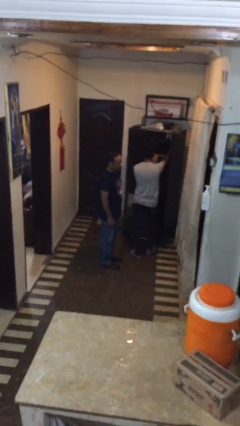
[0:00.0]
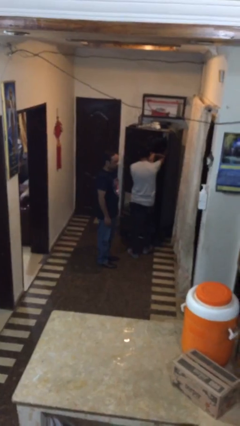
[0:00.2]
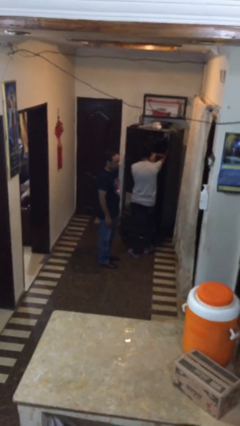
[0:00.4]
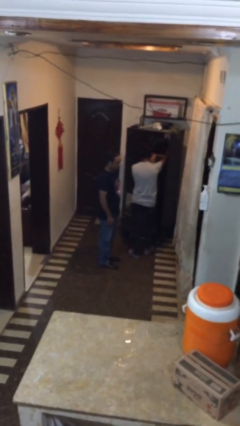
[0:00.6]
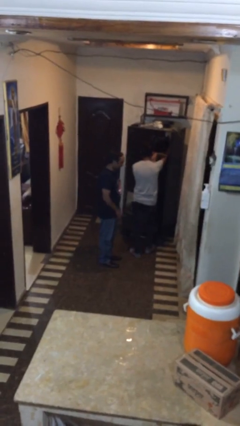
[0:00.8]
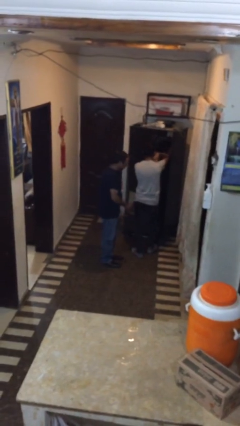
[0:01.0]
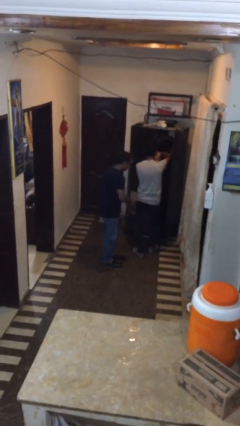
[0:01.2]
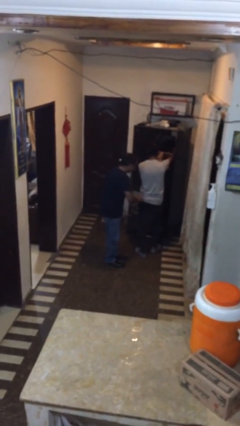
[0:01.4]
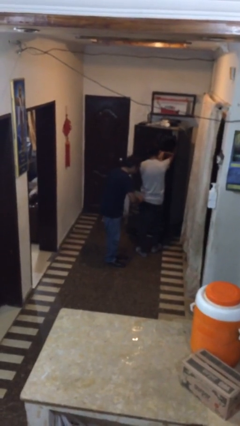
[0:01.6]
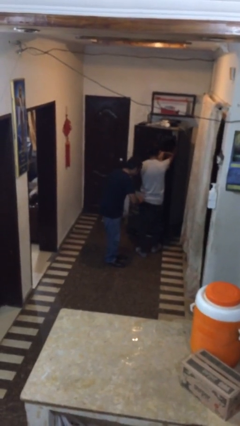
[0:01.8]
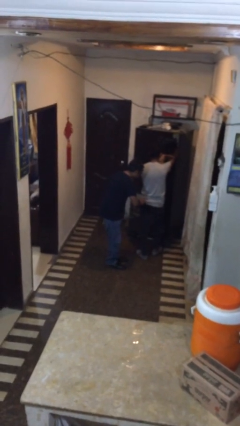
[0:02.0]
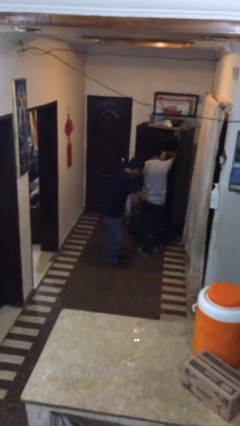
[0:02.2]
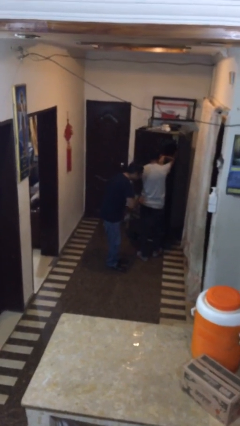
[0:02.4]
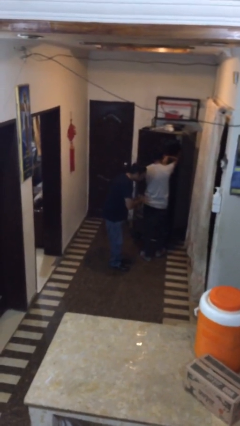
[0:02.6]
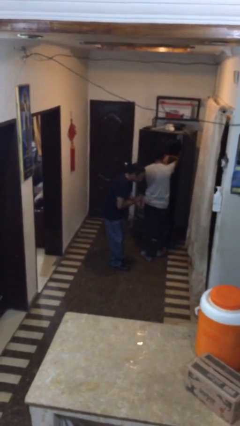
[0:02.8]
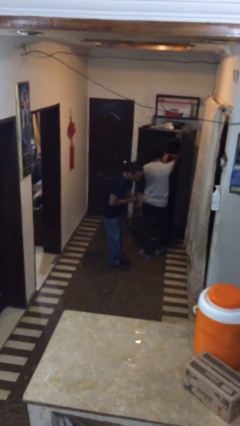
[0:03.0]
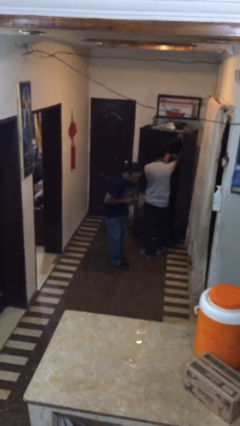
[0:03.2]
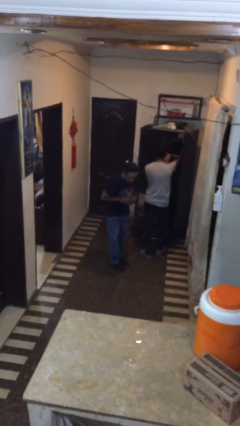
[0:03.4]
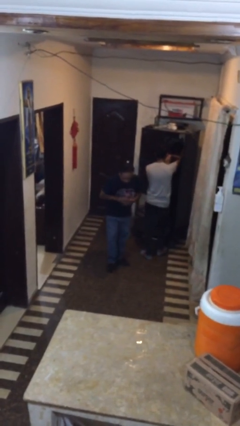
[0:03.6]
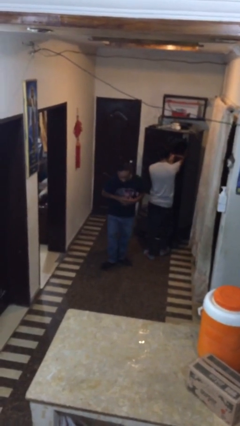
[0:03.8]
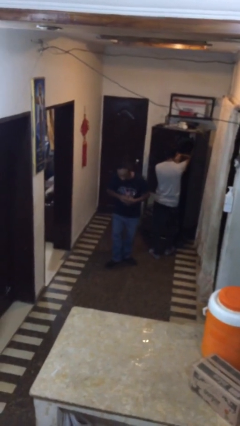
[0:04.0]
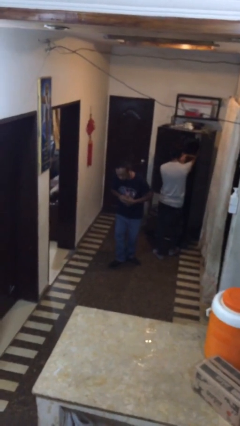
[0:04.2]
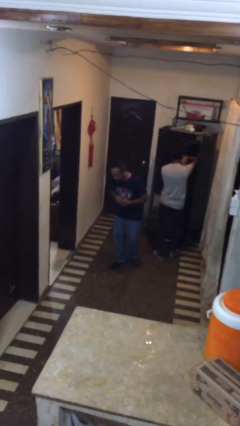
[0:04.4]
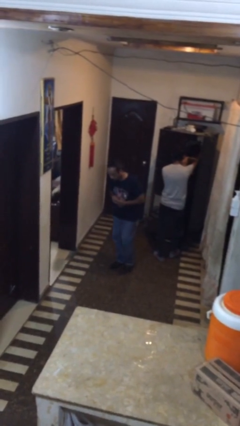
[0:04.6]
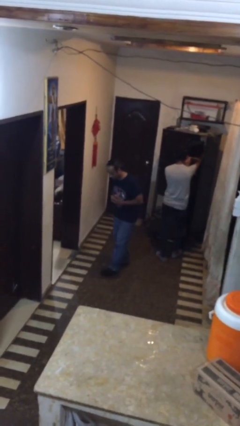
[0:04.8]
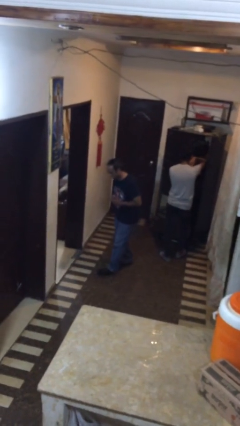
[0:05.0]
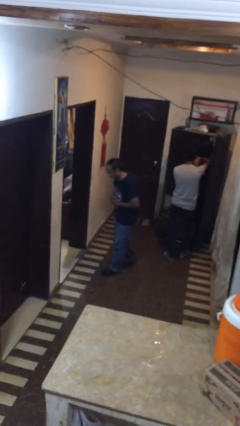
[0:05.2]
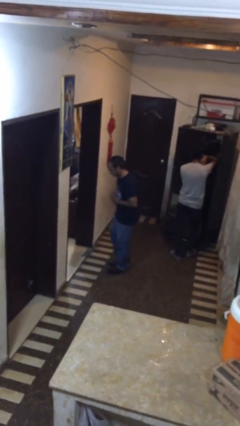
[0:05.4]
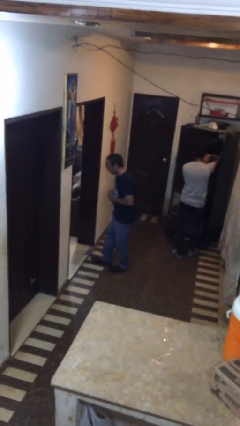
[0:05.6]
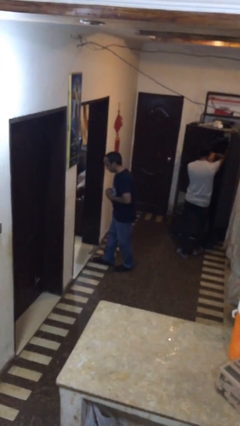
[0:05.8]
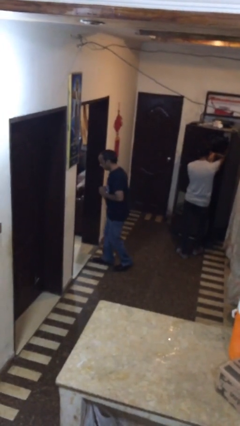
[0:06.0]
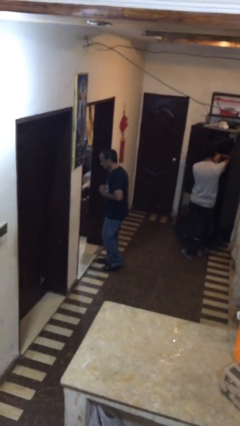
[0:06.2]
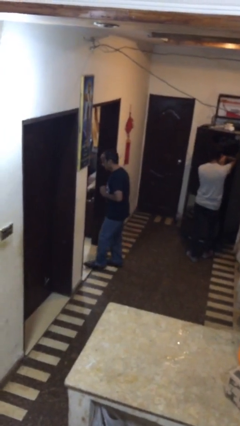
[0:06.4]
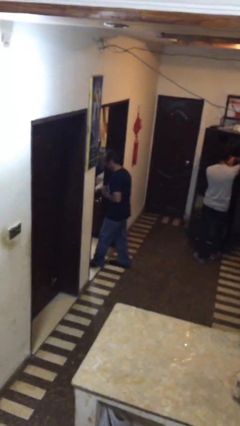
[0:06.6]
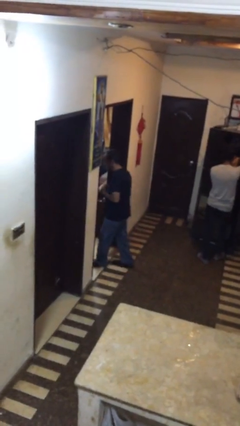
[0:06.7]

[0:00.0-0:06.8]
person steals object from person

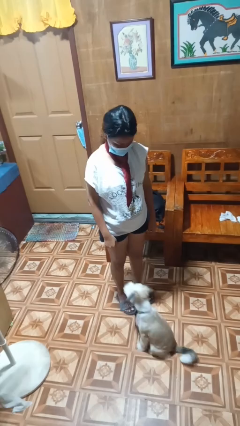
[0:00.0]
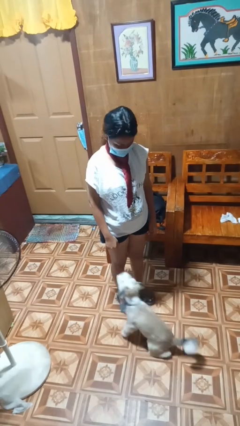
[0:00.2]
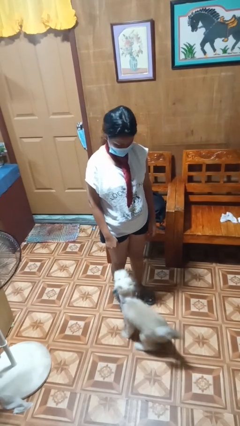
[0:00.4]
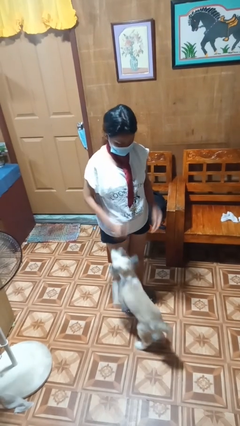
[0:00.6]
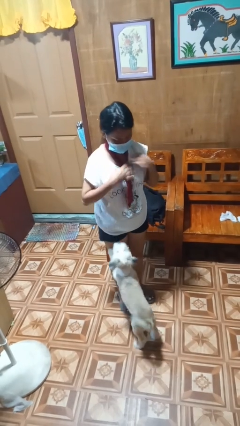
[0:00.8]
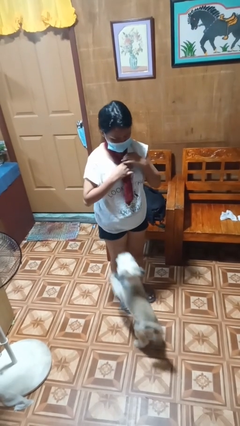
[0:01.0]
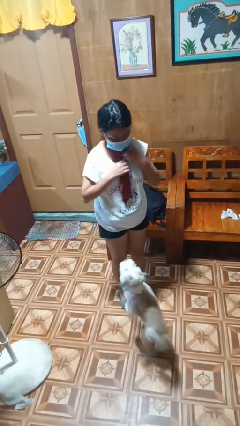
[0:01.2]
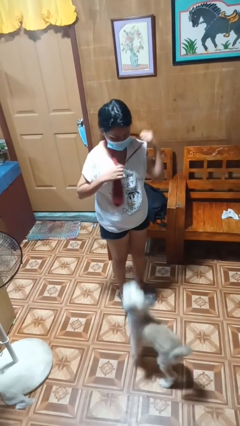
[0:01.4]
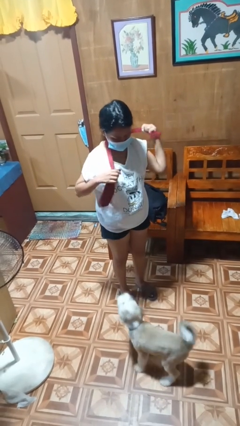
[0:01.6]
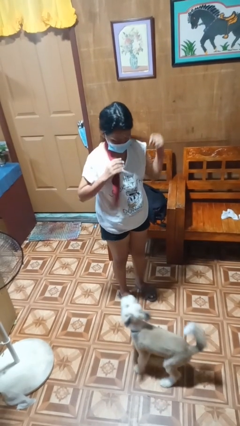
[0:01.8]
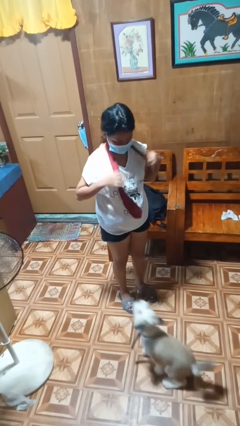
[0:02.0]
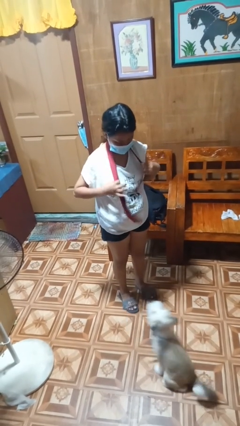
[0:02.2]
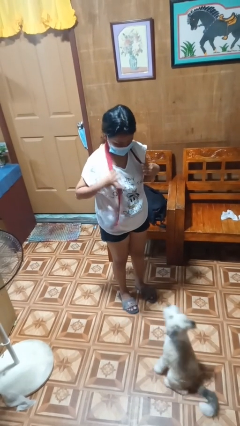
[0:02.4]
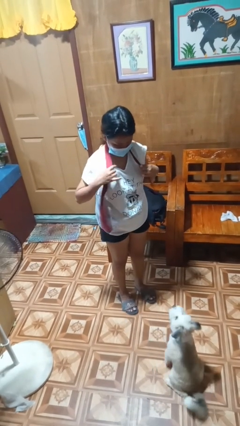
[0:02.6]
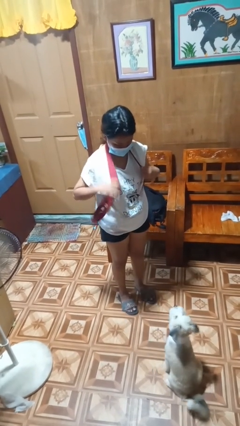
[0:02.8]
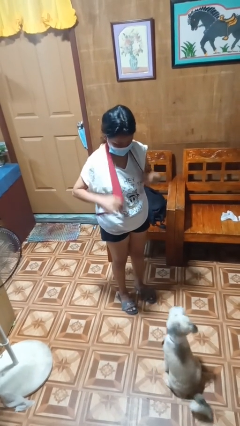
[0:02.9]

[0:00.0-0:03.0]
person takes off necktie

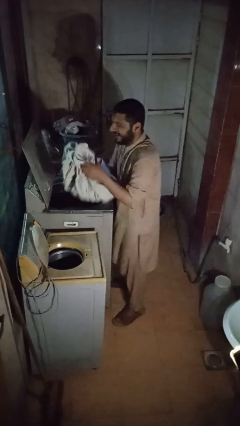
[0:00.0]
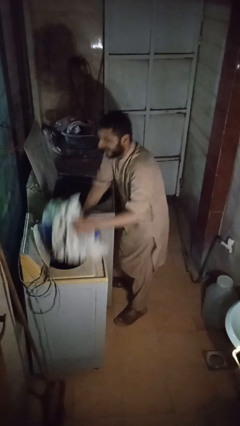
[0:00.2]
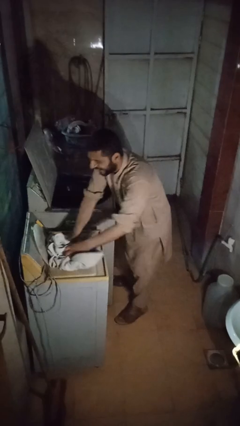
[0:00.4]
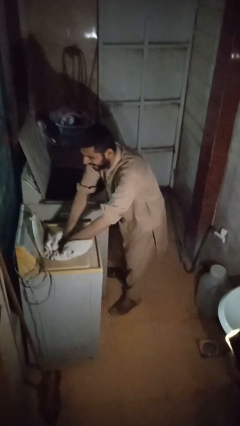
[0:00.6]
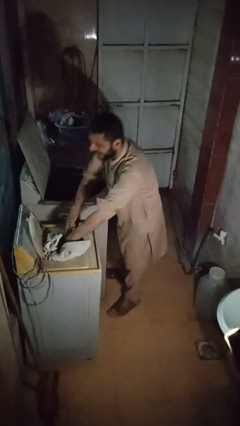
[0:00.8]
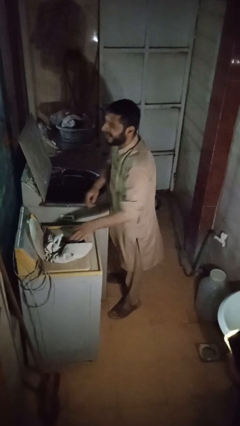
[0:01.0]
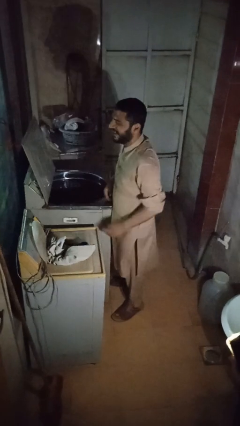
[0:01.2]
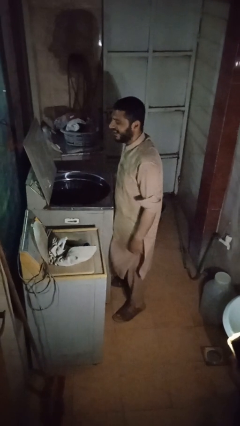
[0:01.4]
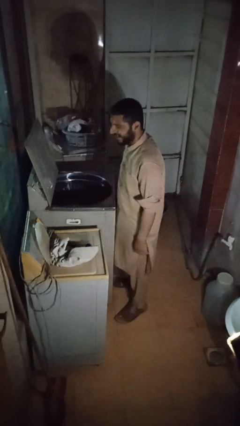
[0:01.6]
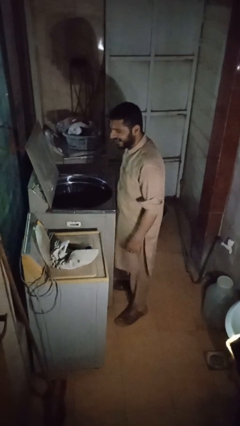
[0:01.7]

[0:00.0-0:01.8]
person loads dryer

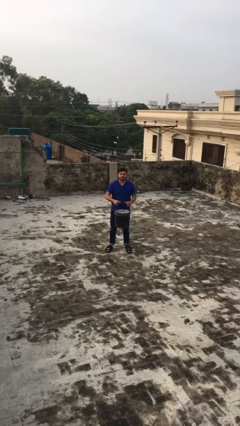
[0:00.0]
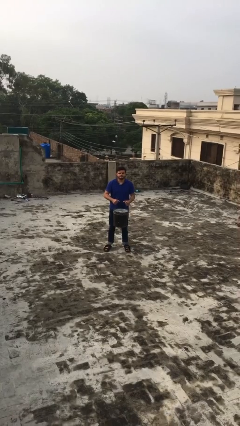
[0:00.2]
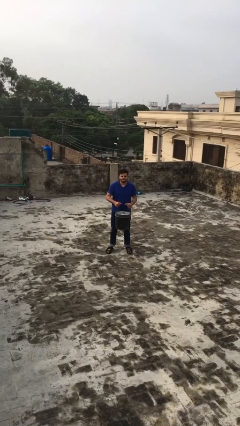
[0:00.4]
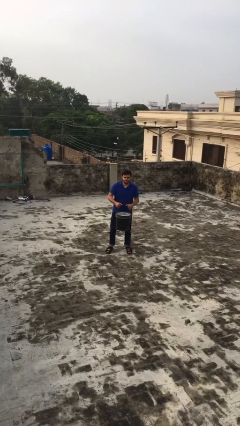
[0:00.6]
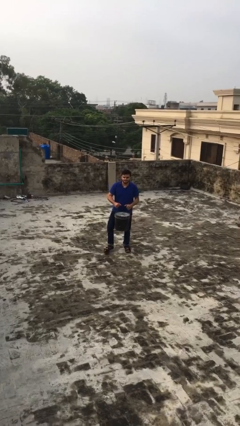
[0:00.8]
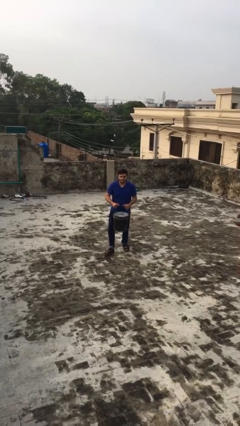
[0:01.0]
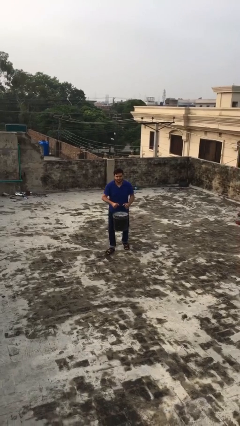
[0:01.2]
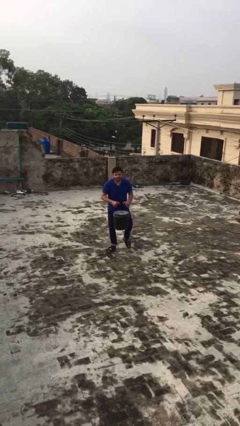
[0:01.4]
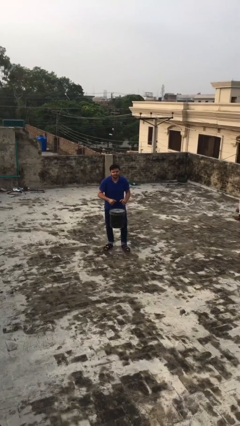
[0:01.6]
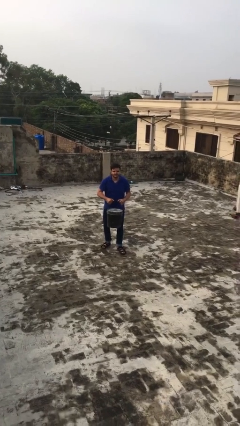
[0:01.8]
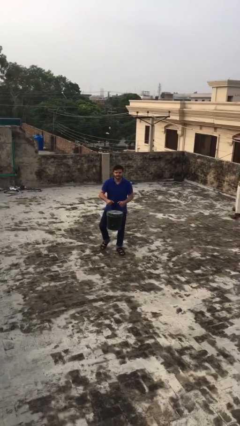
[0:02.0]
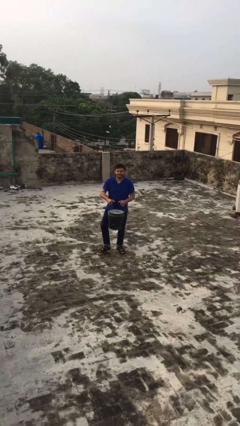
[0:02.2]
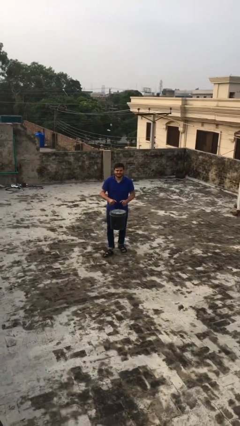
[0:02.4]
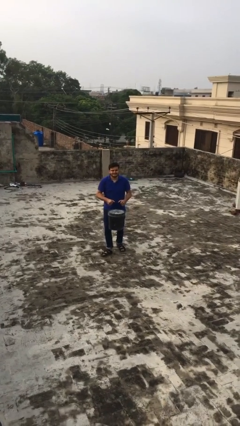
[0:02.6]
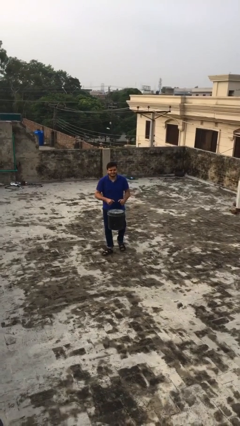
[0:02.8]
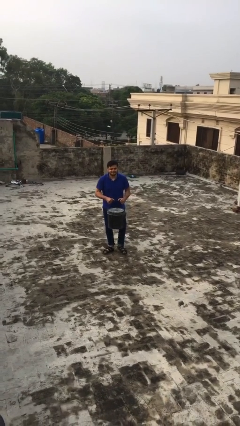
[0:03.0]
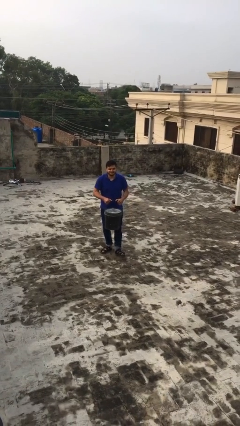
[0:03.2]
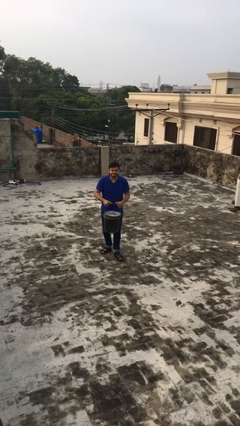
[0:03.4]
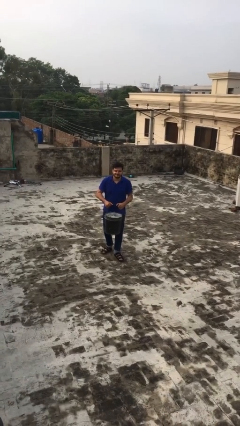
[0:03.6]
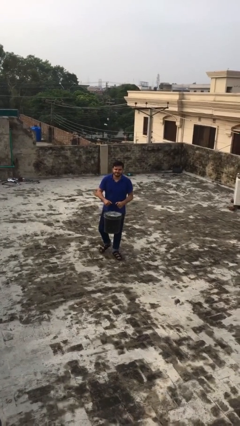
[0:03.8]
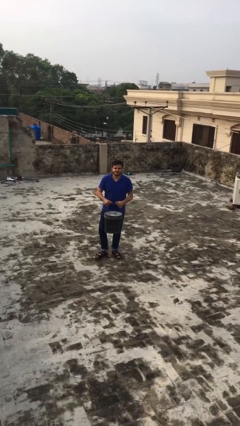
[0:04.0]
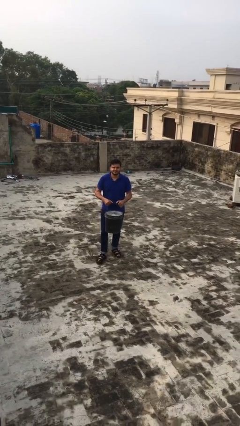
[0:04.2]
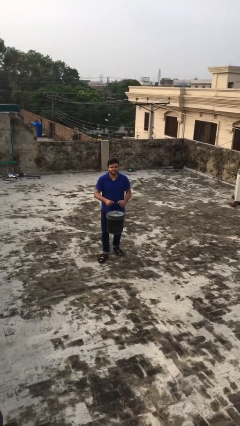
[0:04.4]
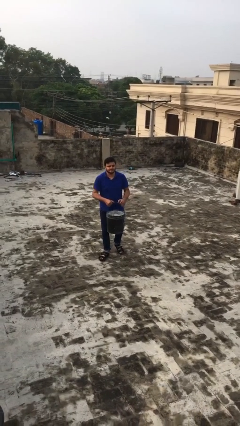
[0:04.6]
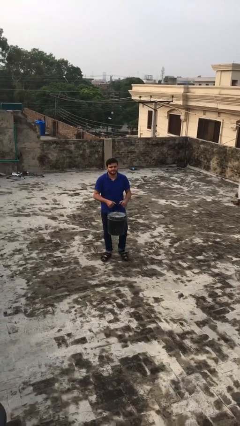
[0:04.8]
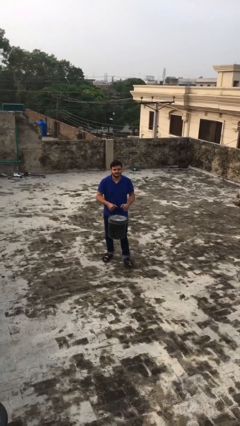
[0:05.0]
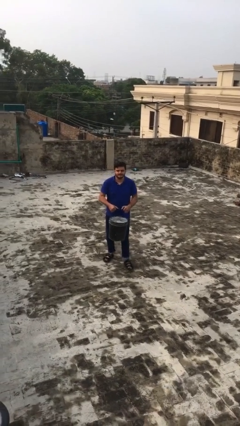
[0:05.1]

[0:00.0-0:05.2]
person carries heavy object

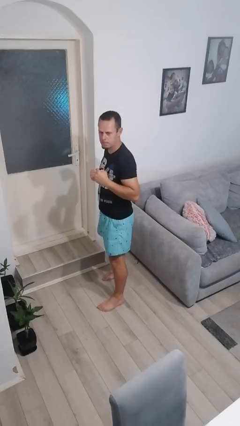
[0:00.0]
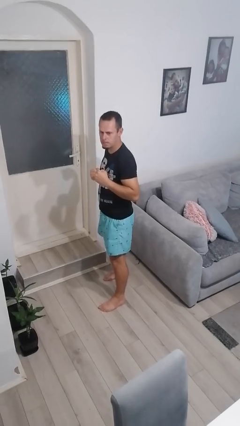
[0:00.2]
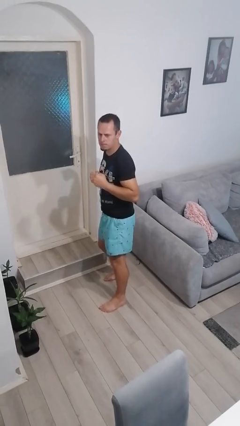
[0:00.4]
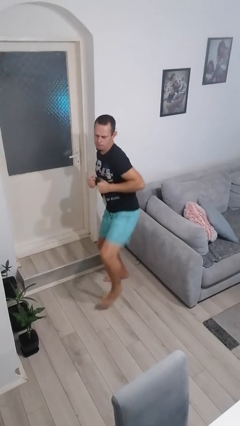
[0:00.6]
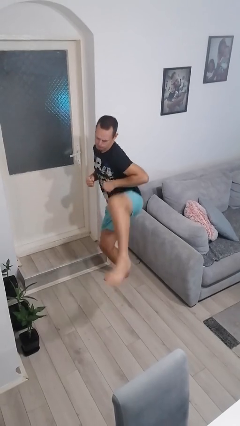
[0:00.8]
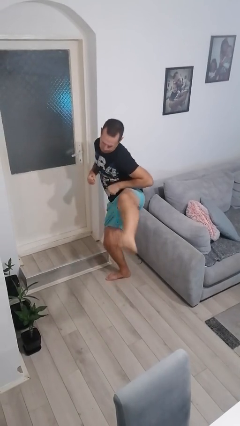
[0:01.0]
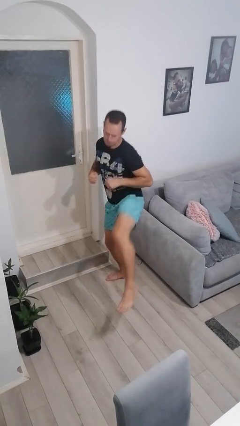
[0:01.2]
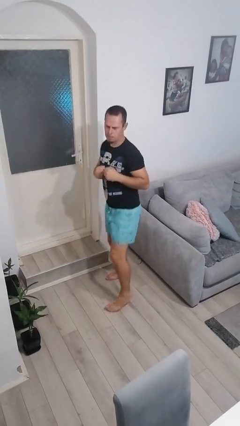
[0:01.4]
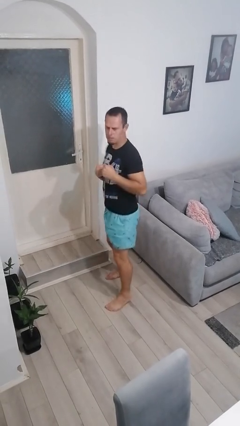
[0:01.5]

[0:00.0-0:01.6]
person karate kicks
